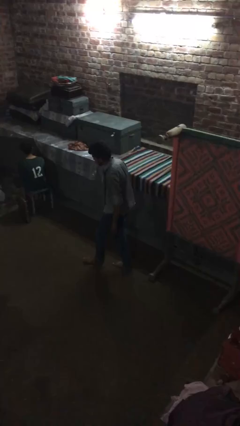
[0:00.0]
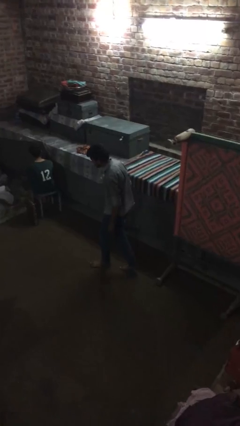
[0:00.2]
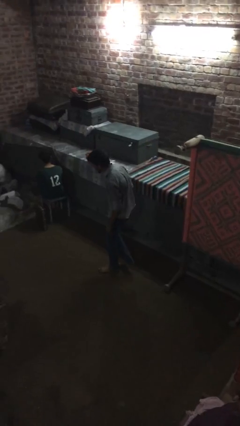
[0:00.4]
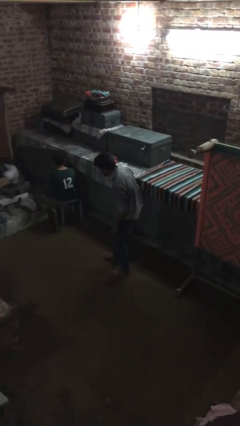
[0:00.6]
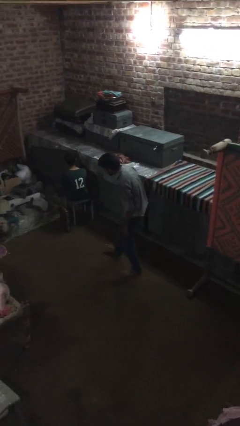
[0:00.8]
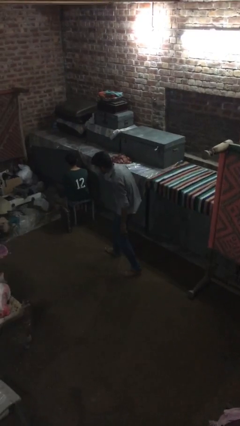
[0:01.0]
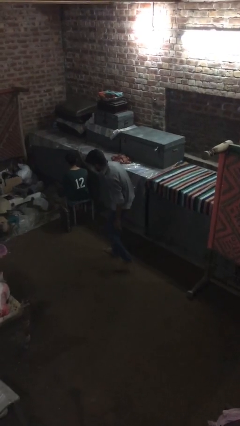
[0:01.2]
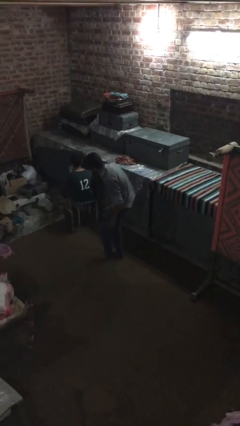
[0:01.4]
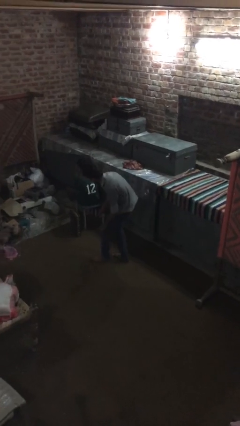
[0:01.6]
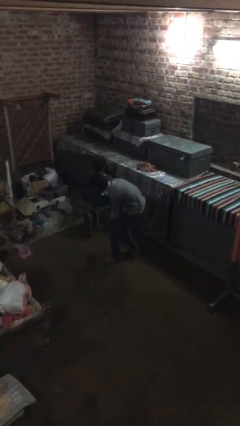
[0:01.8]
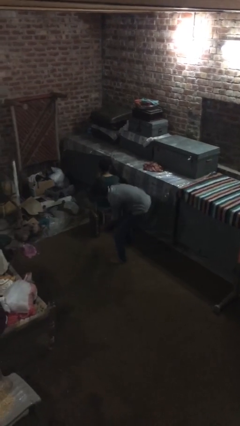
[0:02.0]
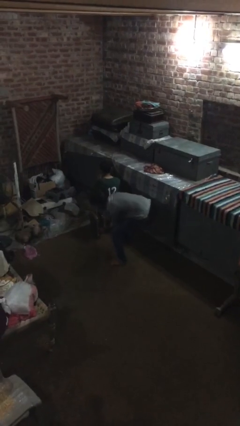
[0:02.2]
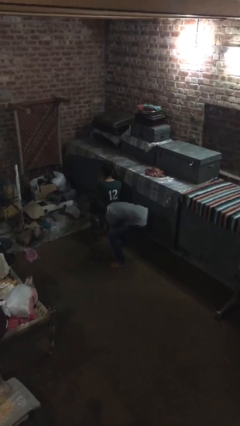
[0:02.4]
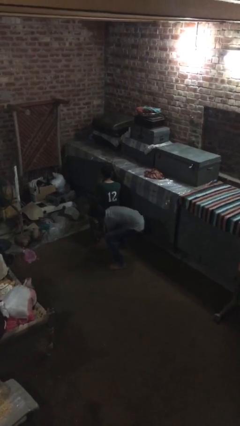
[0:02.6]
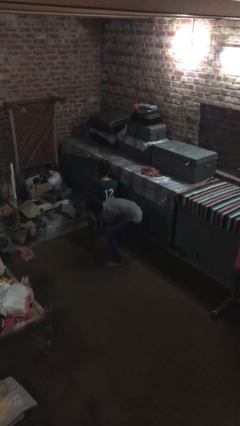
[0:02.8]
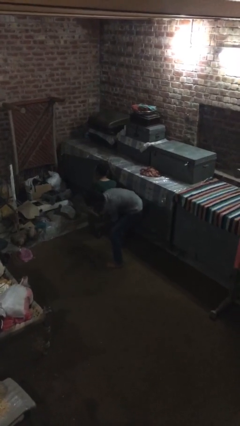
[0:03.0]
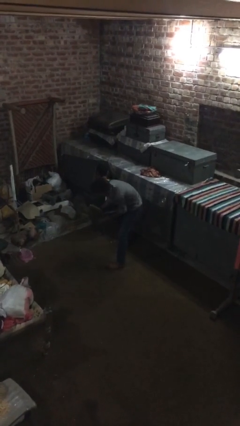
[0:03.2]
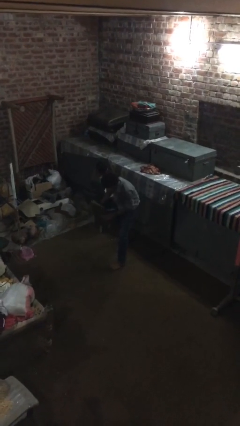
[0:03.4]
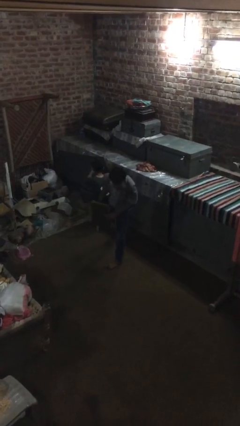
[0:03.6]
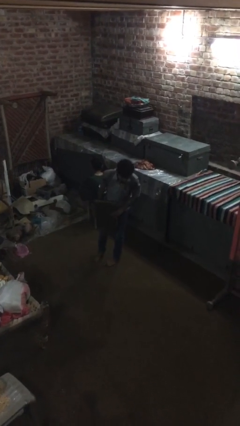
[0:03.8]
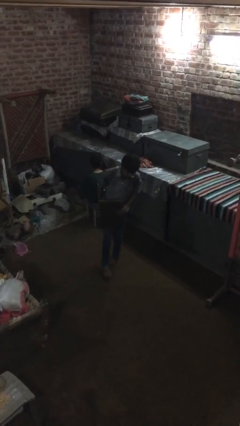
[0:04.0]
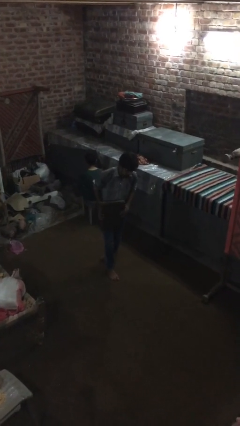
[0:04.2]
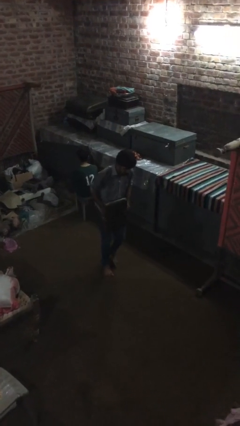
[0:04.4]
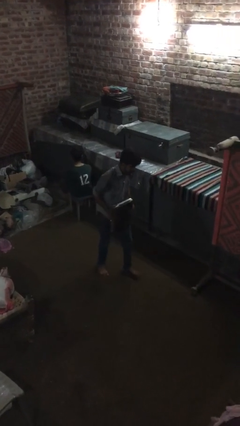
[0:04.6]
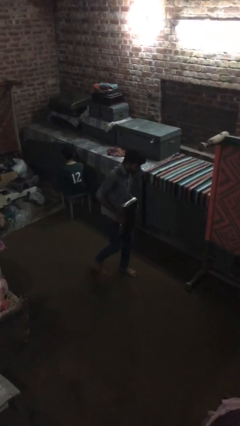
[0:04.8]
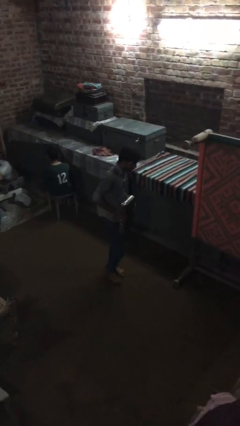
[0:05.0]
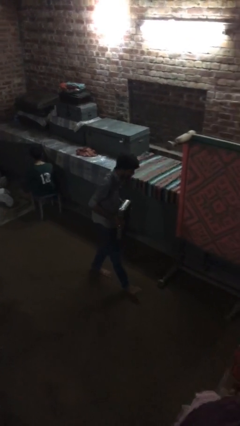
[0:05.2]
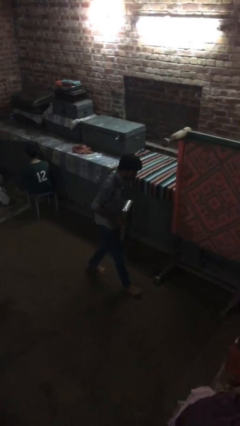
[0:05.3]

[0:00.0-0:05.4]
person steals object from person

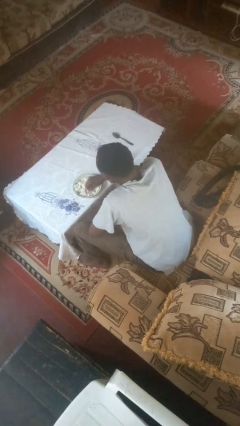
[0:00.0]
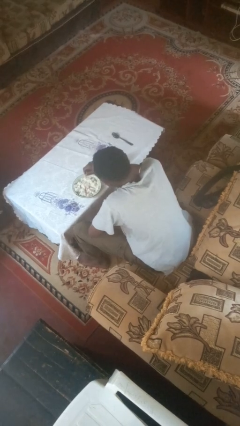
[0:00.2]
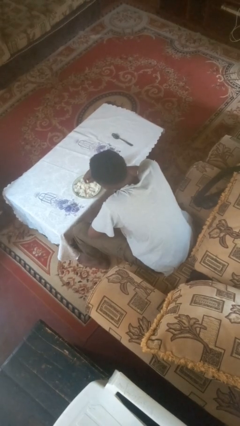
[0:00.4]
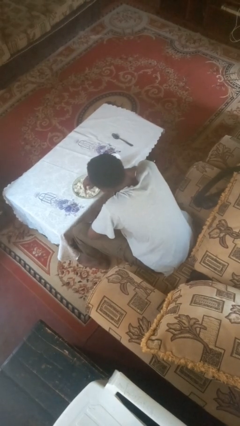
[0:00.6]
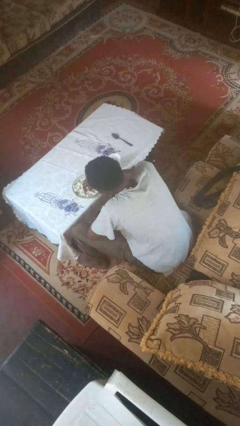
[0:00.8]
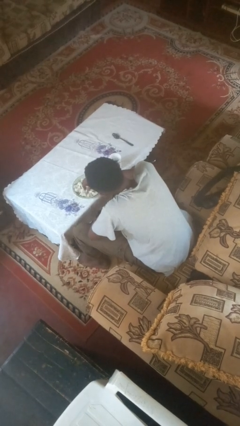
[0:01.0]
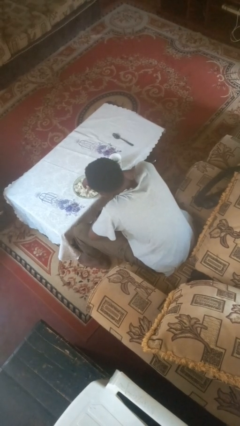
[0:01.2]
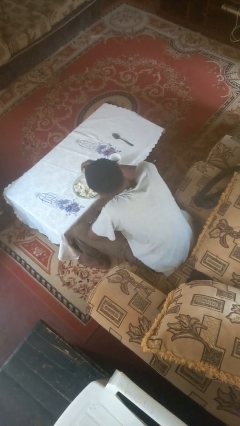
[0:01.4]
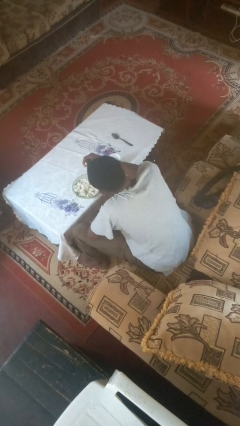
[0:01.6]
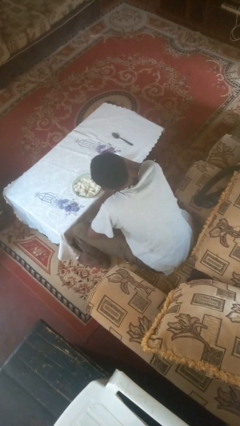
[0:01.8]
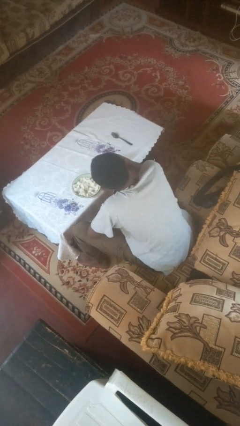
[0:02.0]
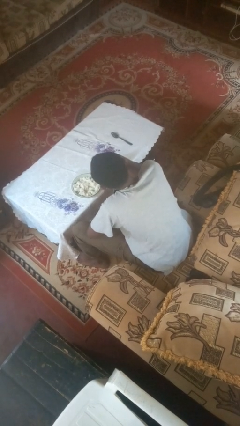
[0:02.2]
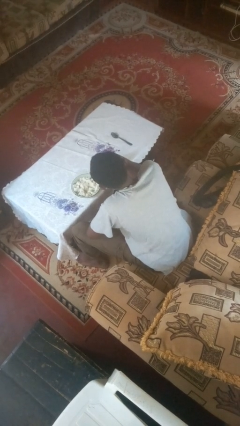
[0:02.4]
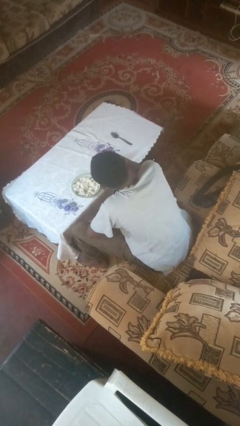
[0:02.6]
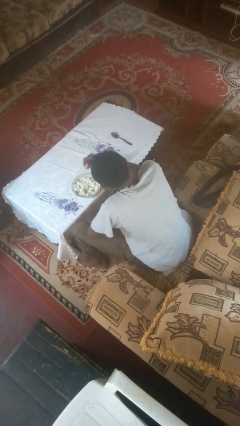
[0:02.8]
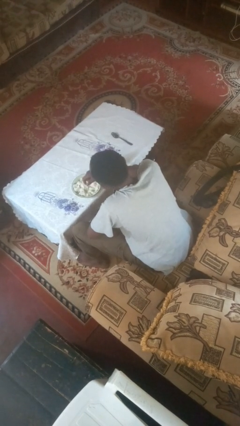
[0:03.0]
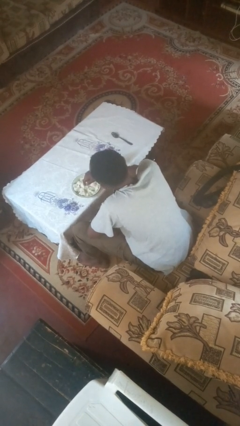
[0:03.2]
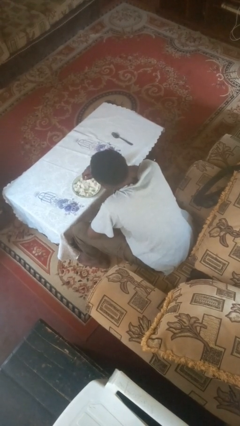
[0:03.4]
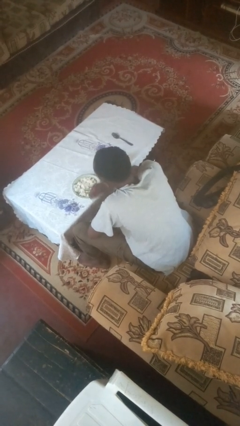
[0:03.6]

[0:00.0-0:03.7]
person eats with hands

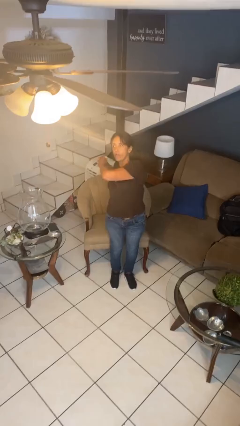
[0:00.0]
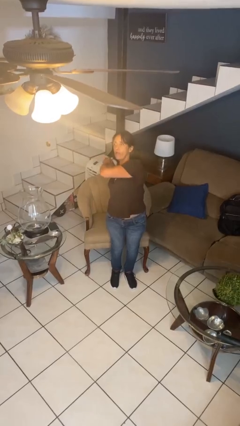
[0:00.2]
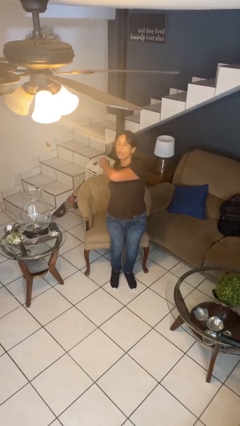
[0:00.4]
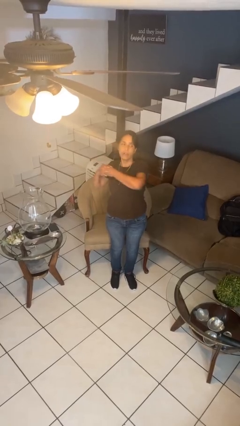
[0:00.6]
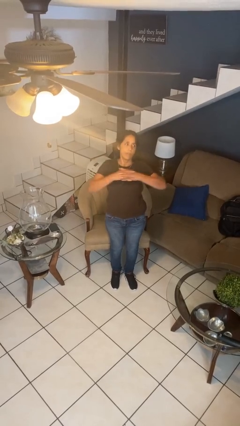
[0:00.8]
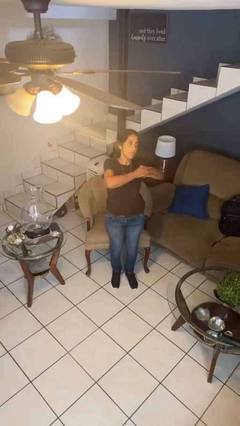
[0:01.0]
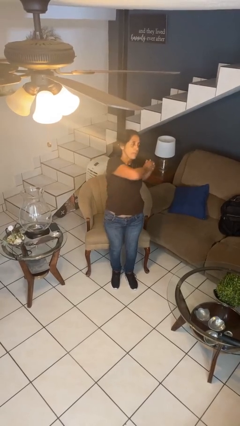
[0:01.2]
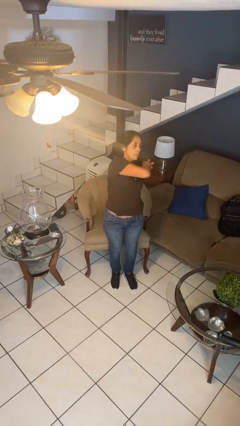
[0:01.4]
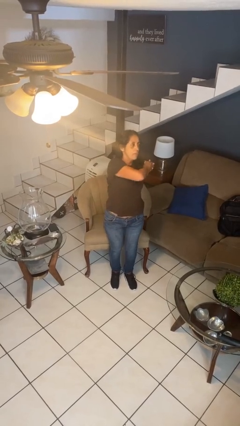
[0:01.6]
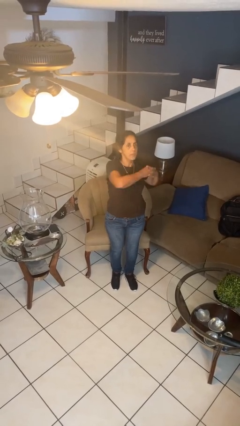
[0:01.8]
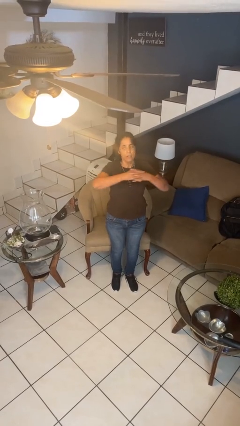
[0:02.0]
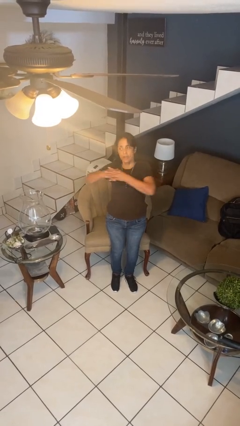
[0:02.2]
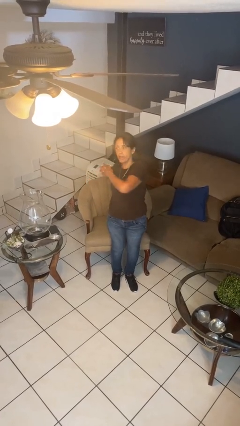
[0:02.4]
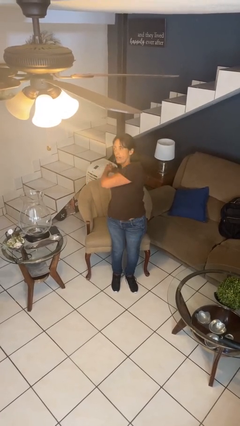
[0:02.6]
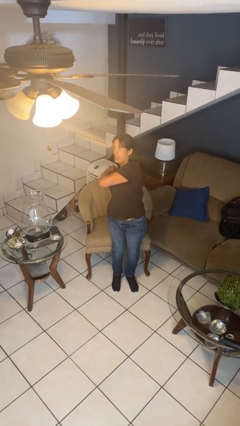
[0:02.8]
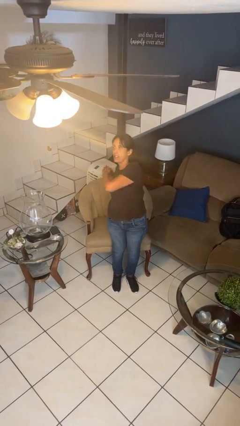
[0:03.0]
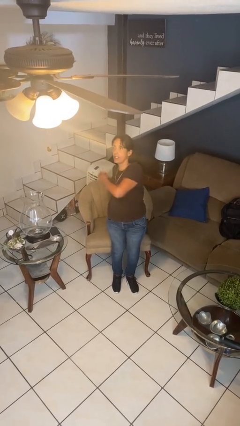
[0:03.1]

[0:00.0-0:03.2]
person stretches arms to side

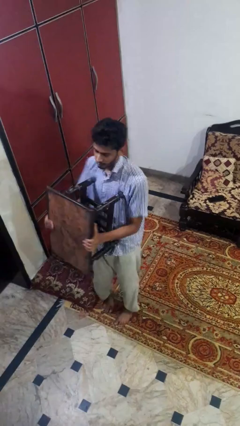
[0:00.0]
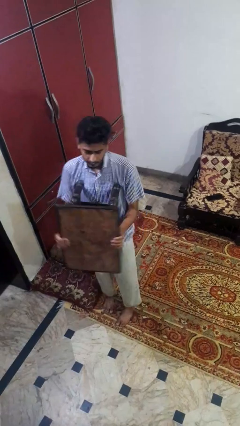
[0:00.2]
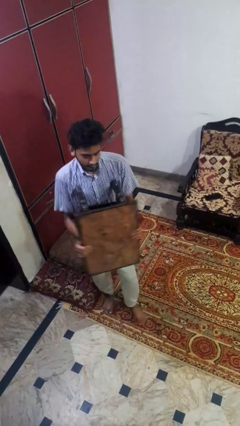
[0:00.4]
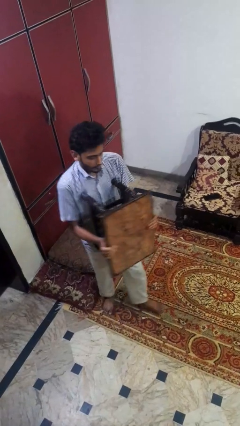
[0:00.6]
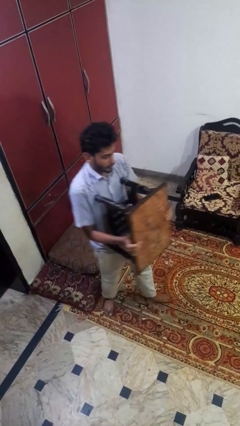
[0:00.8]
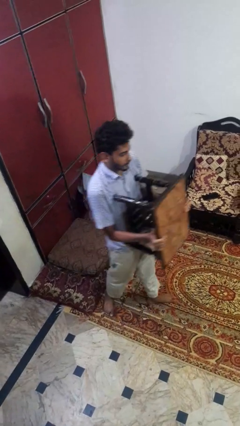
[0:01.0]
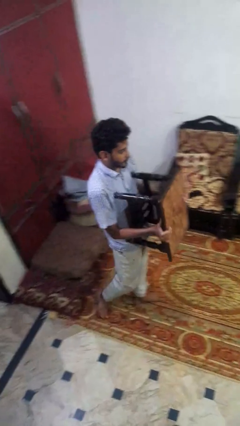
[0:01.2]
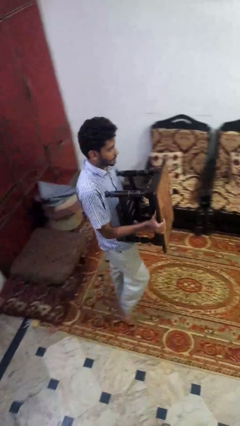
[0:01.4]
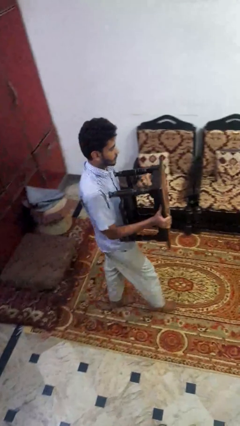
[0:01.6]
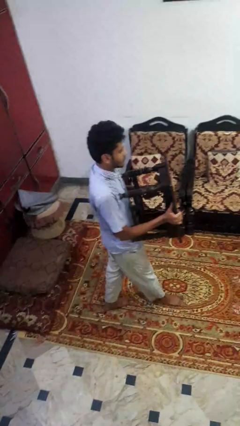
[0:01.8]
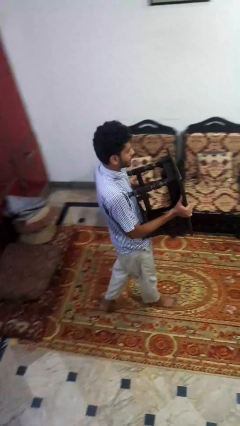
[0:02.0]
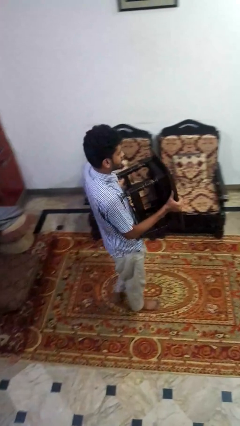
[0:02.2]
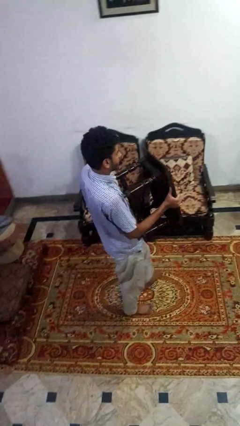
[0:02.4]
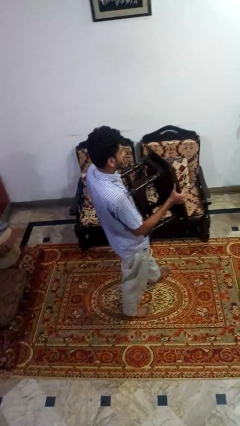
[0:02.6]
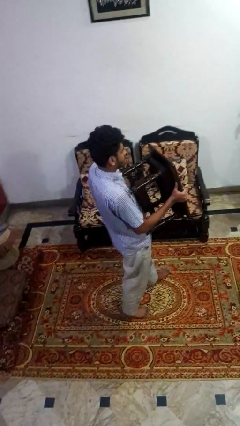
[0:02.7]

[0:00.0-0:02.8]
person carries furniture

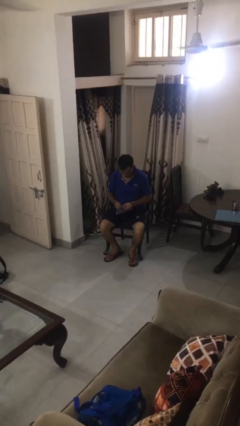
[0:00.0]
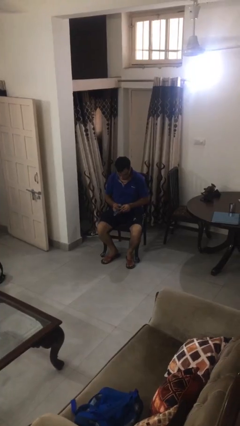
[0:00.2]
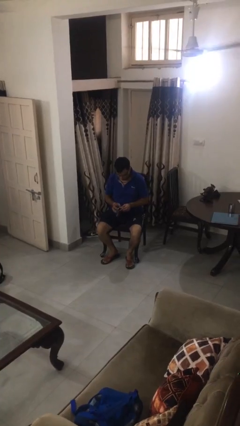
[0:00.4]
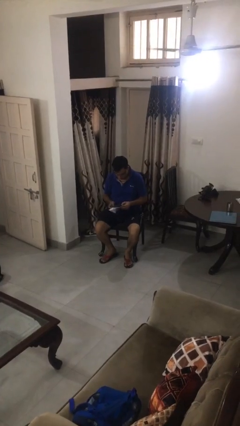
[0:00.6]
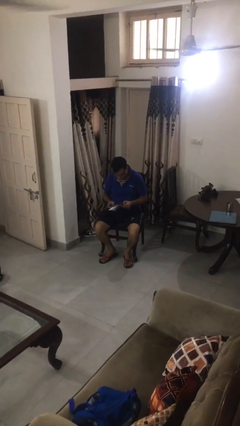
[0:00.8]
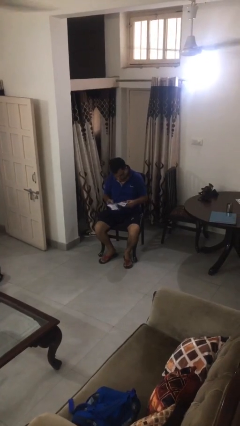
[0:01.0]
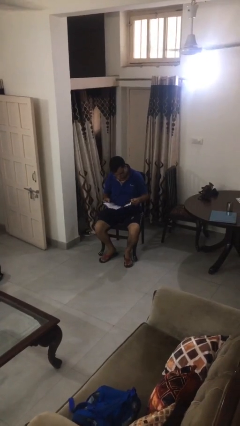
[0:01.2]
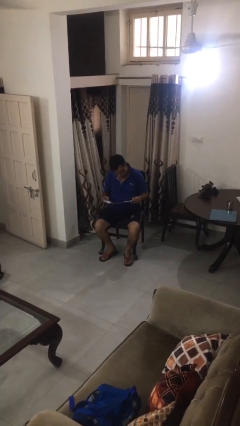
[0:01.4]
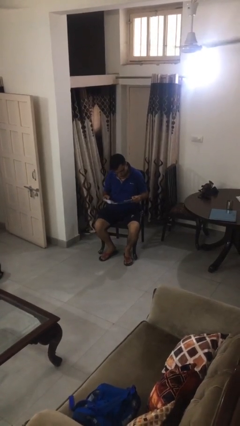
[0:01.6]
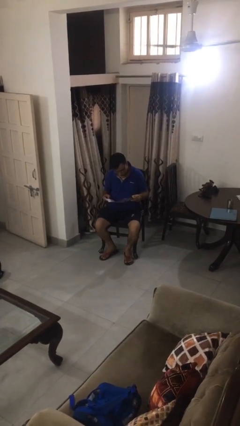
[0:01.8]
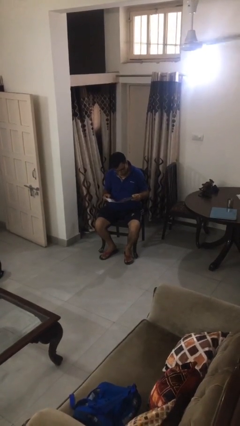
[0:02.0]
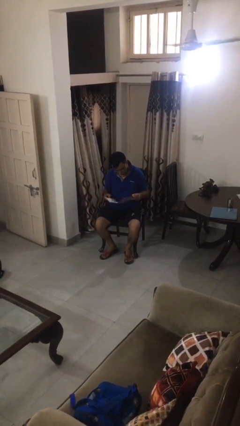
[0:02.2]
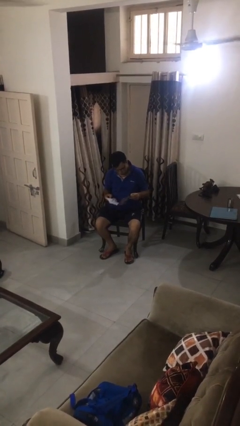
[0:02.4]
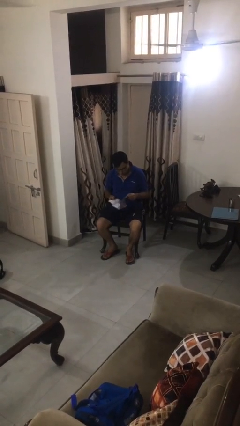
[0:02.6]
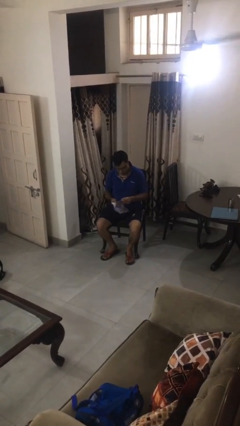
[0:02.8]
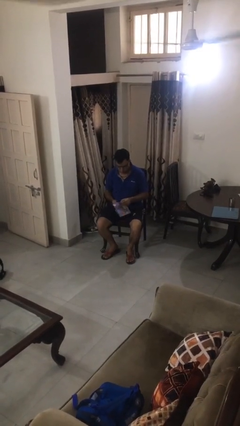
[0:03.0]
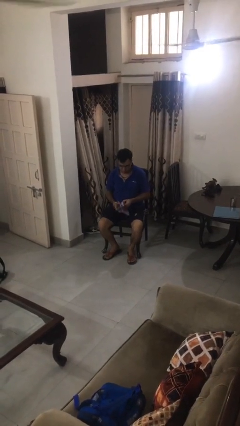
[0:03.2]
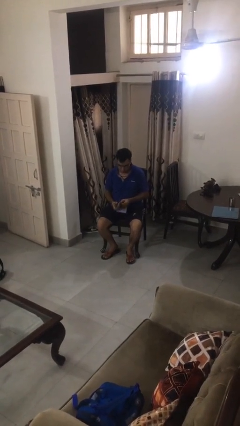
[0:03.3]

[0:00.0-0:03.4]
person reads magazine
